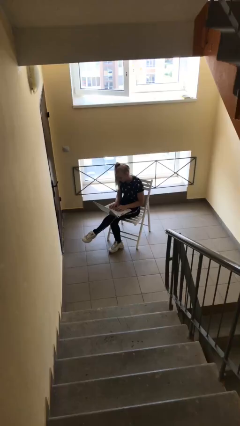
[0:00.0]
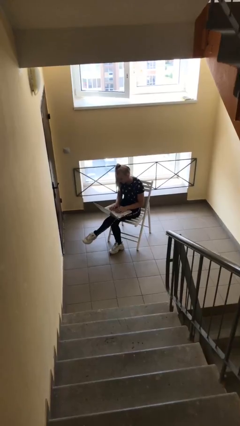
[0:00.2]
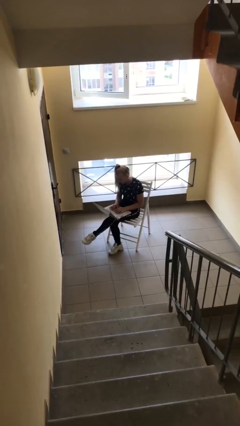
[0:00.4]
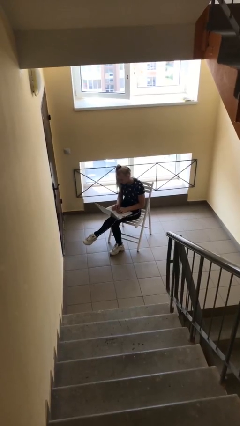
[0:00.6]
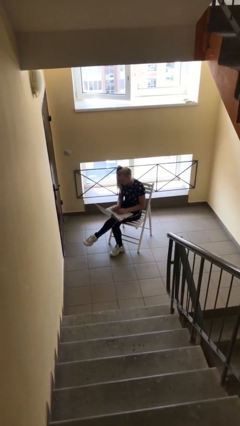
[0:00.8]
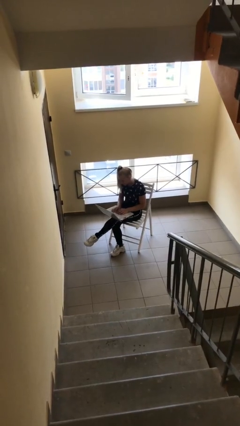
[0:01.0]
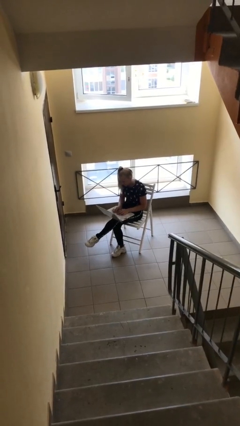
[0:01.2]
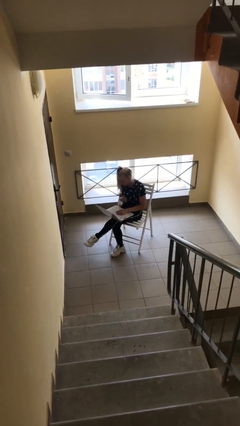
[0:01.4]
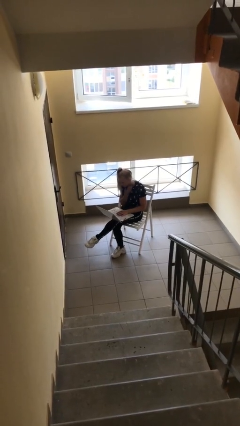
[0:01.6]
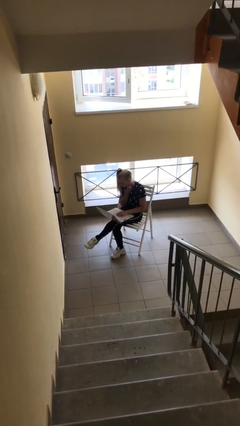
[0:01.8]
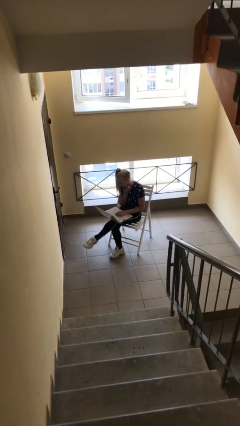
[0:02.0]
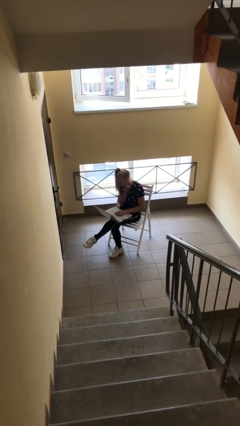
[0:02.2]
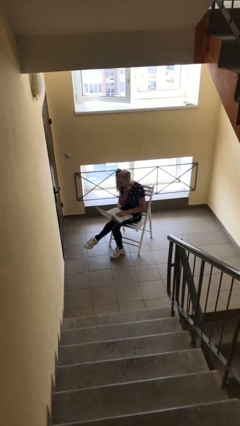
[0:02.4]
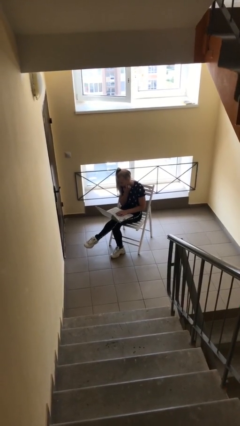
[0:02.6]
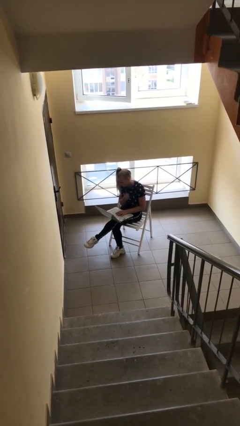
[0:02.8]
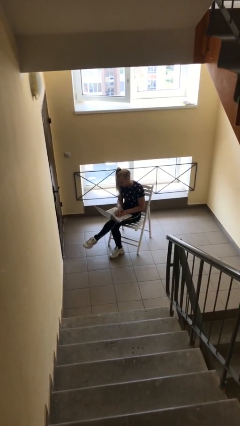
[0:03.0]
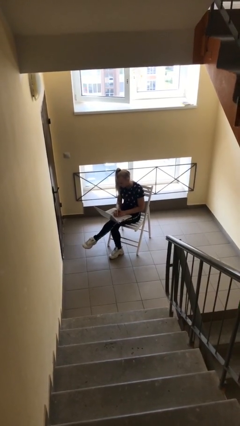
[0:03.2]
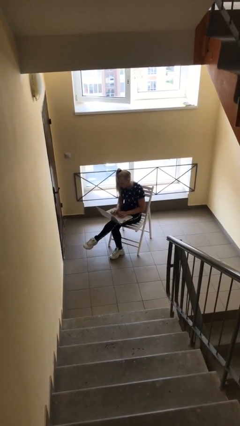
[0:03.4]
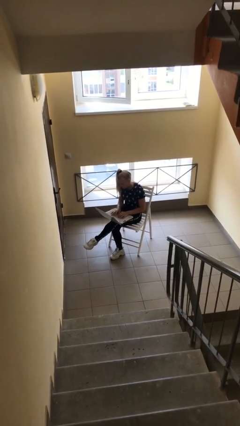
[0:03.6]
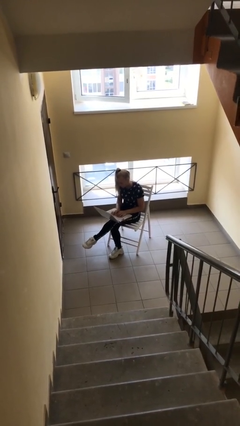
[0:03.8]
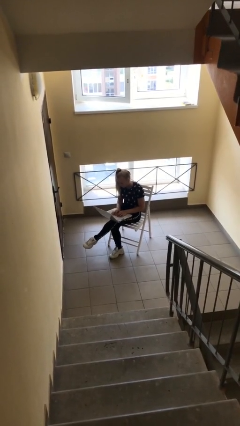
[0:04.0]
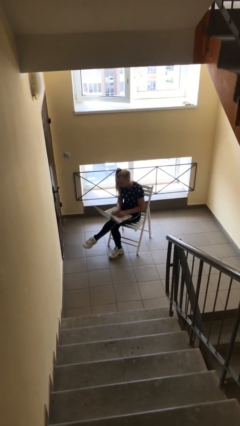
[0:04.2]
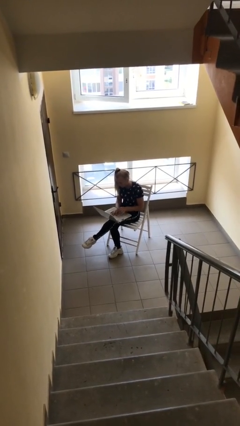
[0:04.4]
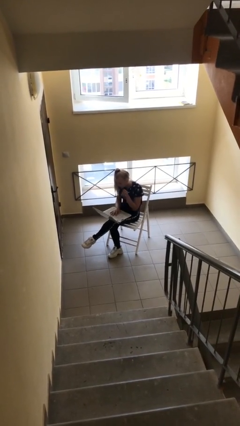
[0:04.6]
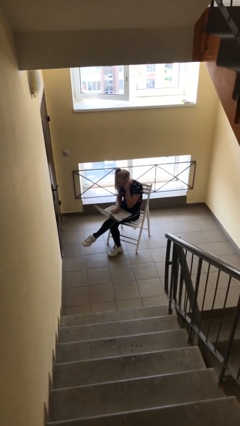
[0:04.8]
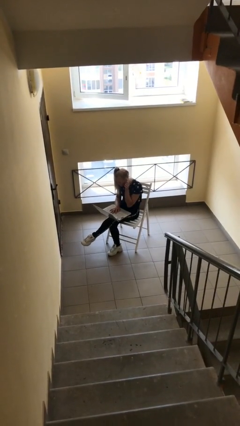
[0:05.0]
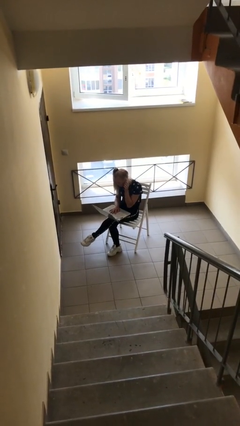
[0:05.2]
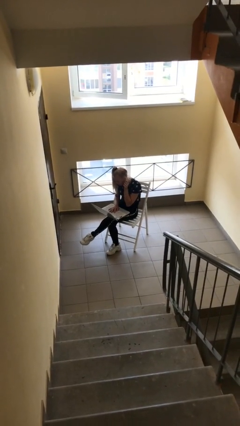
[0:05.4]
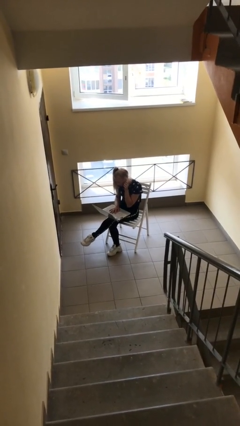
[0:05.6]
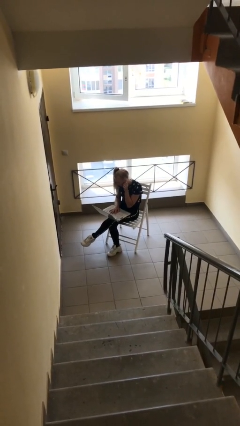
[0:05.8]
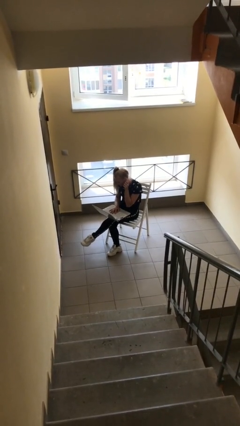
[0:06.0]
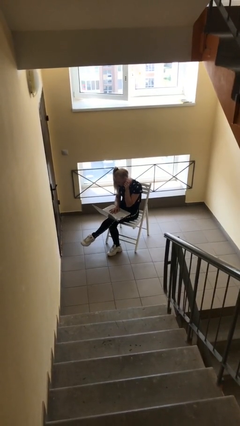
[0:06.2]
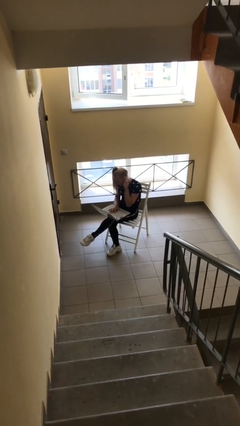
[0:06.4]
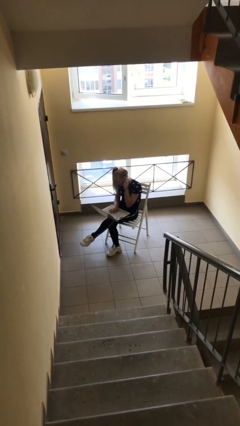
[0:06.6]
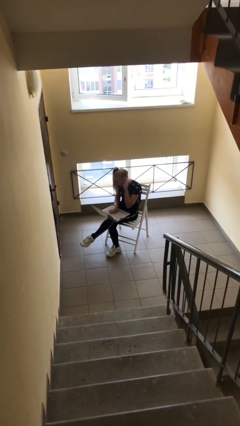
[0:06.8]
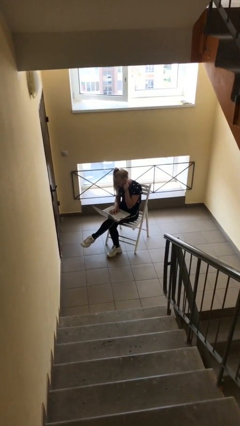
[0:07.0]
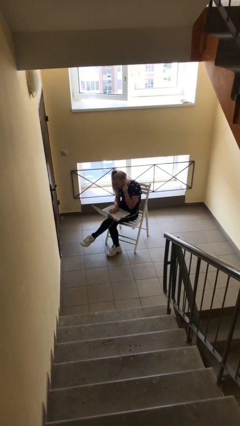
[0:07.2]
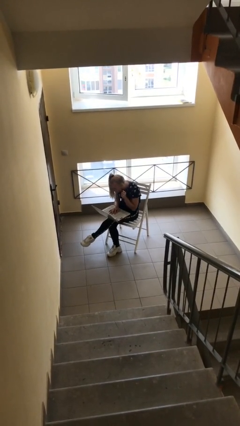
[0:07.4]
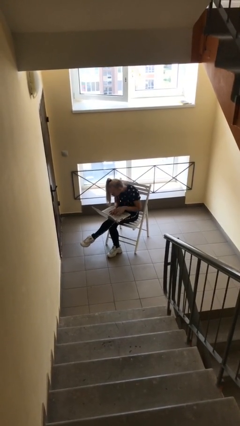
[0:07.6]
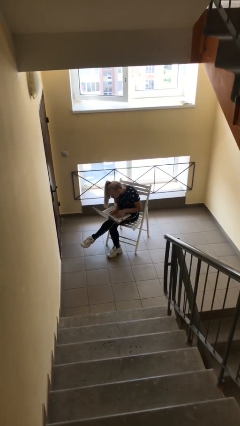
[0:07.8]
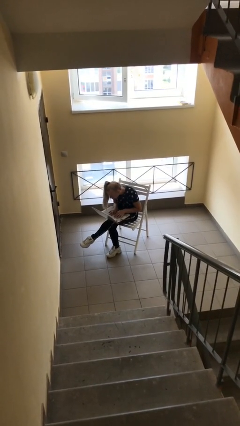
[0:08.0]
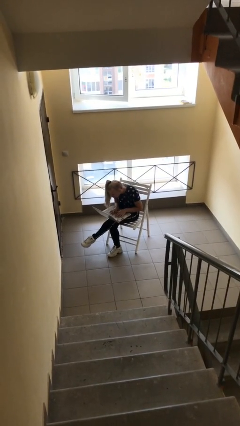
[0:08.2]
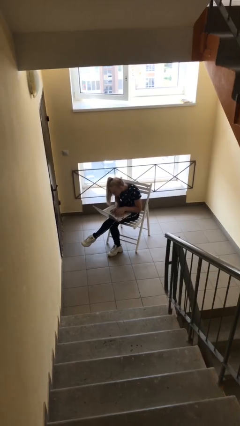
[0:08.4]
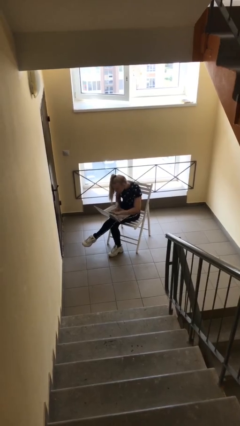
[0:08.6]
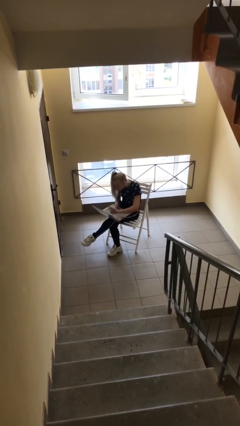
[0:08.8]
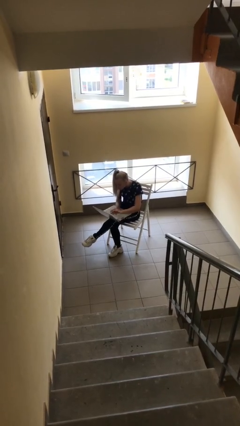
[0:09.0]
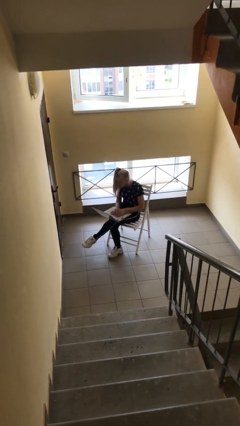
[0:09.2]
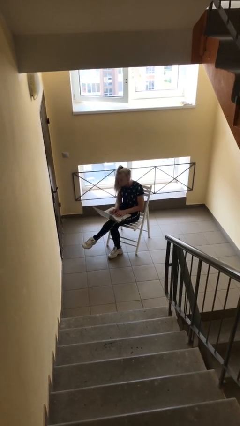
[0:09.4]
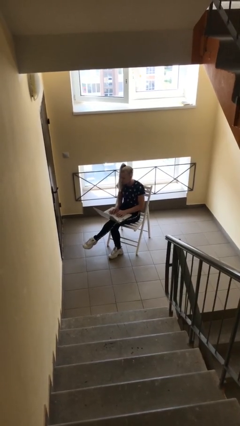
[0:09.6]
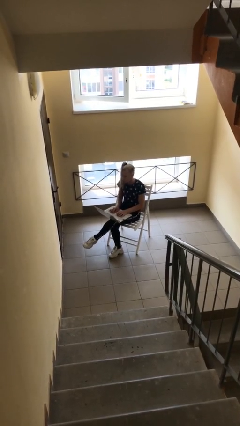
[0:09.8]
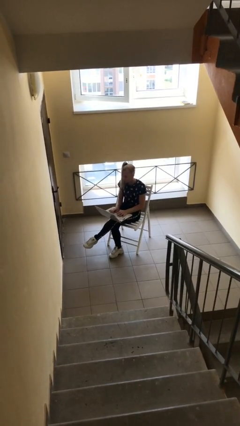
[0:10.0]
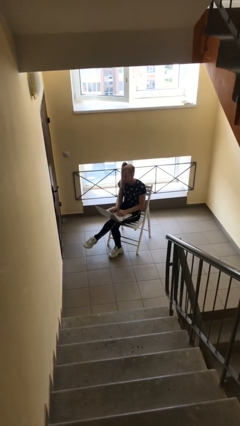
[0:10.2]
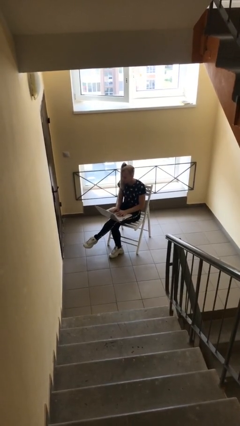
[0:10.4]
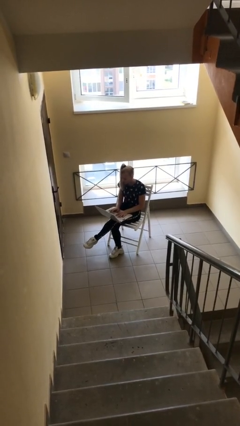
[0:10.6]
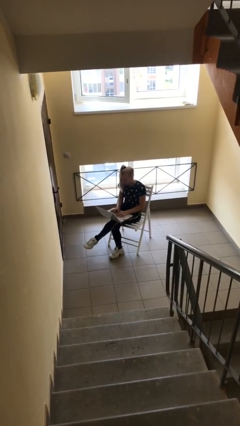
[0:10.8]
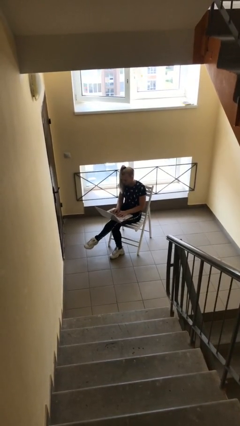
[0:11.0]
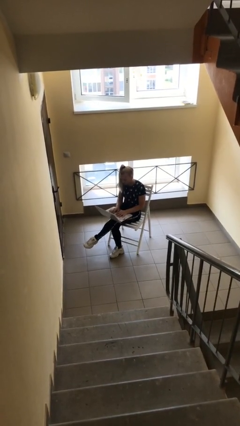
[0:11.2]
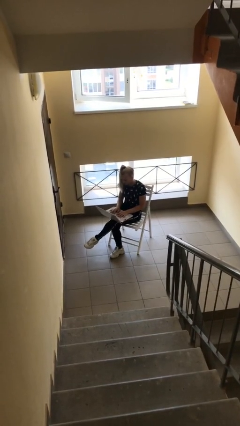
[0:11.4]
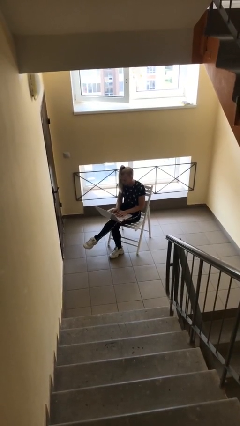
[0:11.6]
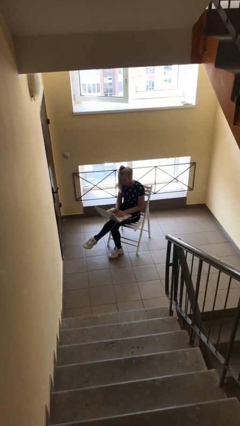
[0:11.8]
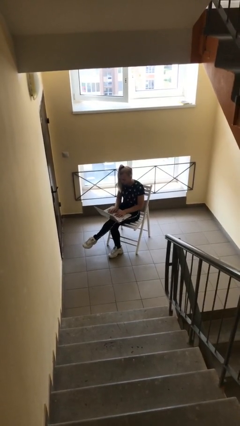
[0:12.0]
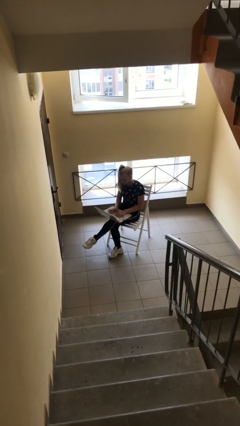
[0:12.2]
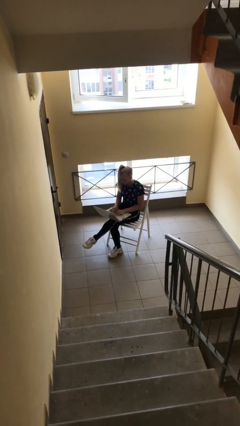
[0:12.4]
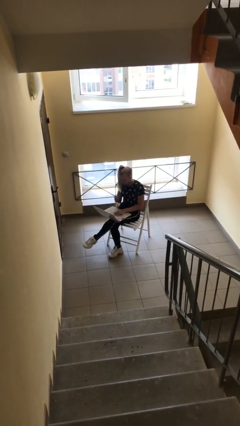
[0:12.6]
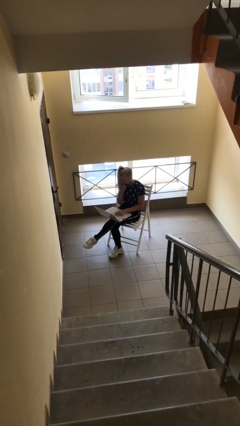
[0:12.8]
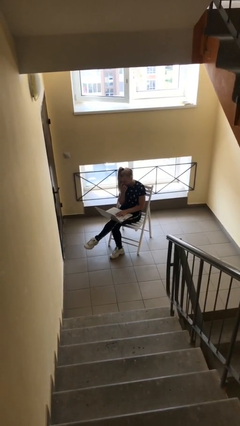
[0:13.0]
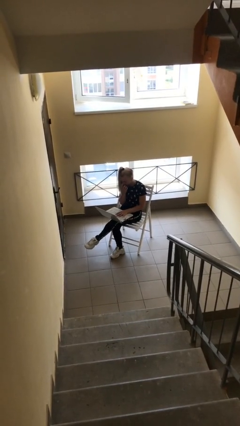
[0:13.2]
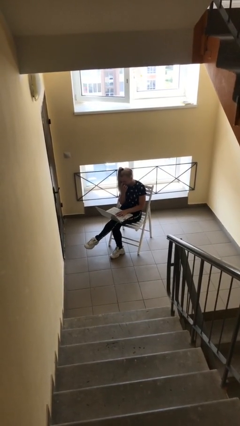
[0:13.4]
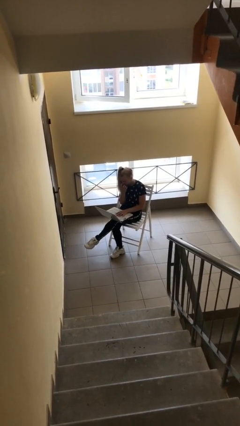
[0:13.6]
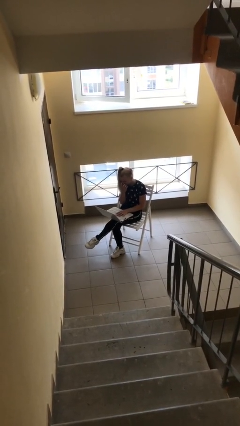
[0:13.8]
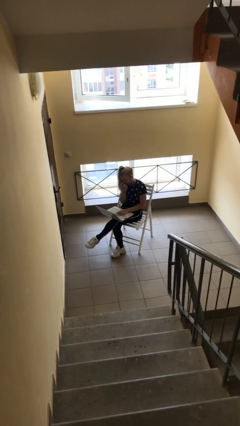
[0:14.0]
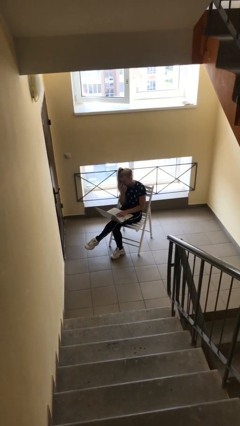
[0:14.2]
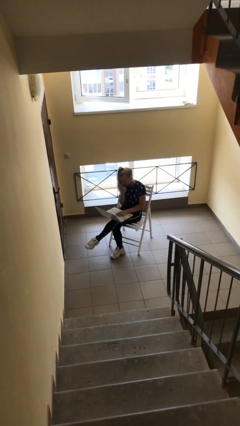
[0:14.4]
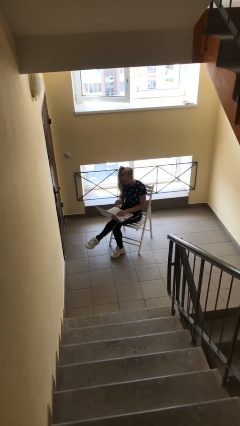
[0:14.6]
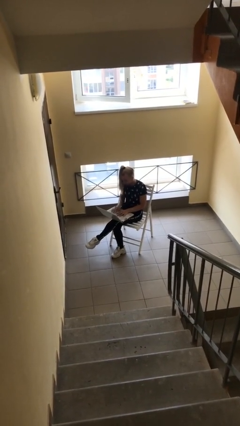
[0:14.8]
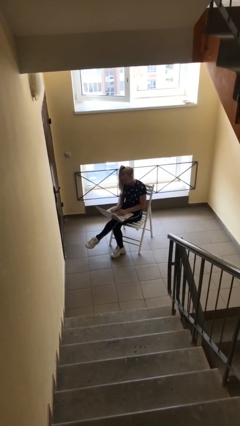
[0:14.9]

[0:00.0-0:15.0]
person interacts with laptop

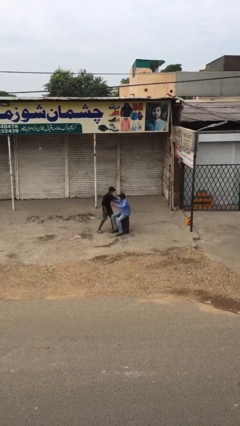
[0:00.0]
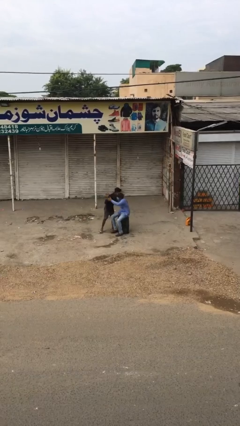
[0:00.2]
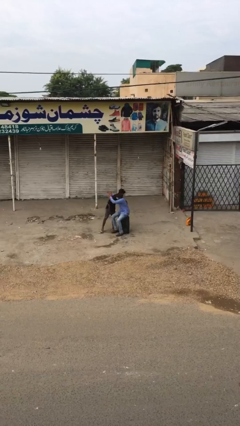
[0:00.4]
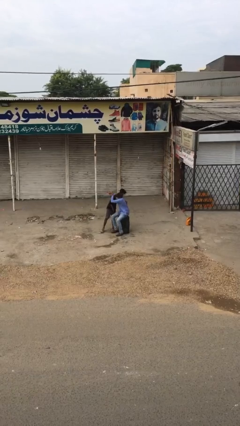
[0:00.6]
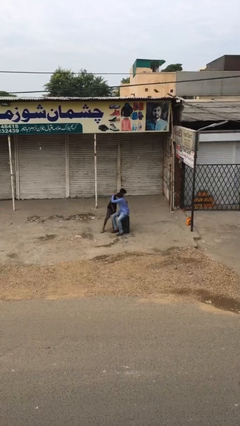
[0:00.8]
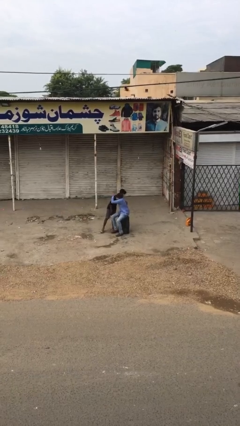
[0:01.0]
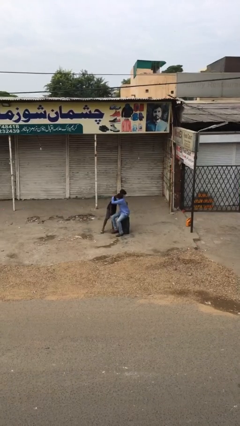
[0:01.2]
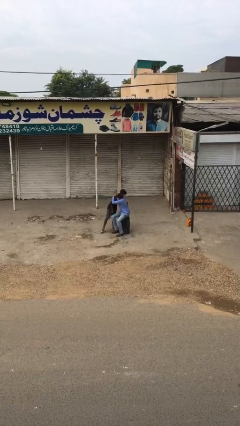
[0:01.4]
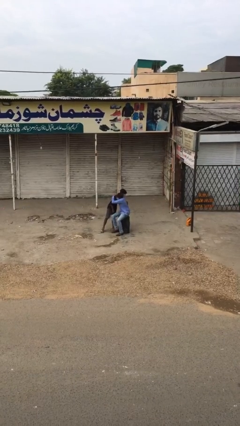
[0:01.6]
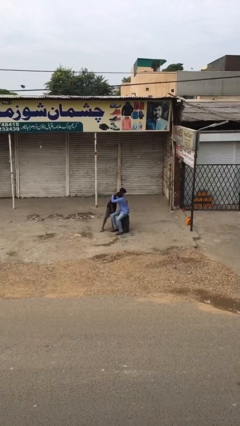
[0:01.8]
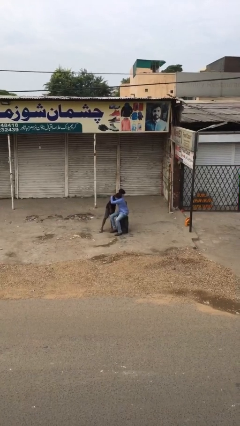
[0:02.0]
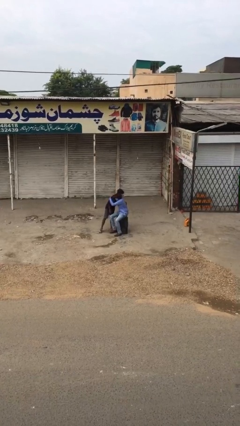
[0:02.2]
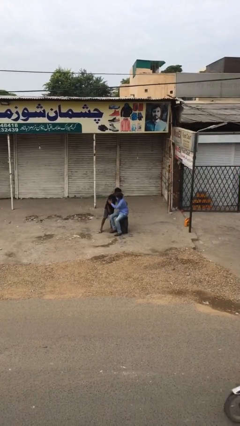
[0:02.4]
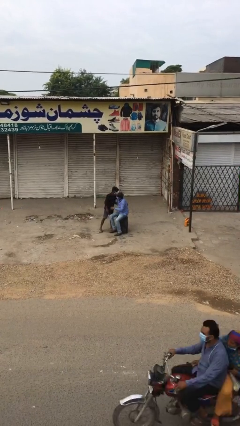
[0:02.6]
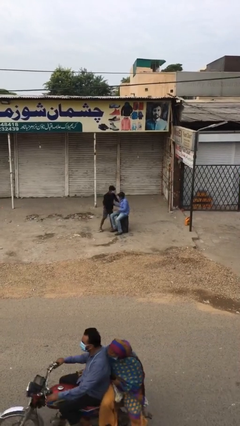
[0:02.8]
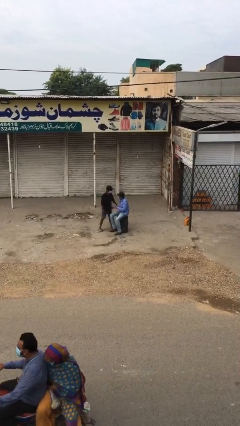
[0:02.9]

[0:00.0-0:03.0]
person embraces person

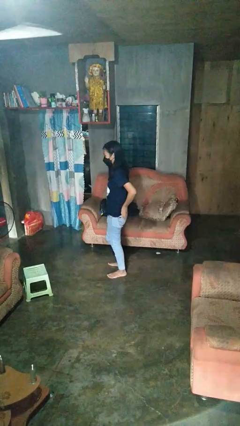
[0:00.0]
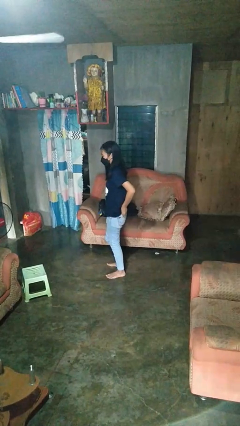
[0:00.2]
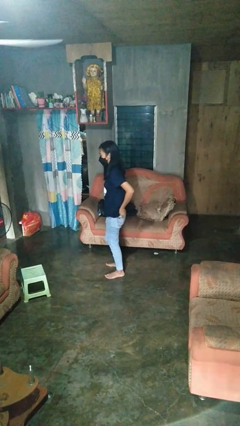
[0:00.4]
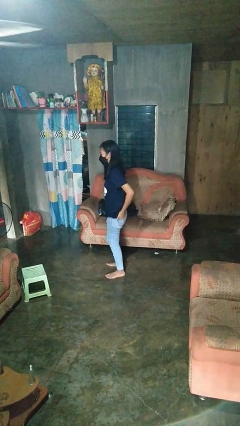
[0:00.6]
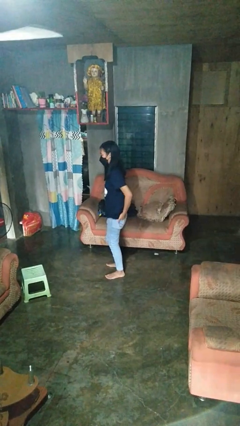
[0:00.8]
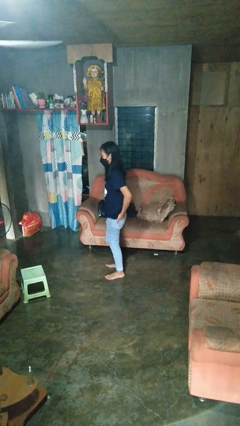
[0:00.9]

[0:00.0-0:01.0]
person puts hands in back pockets
